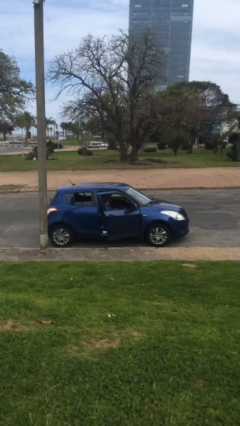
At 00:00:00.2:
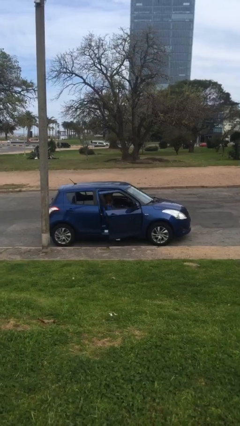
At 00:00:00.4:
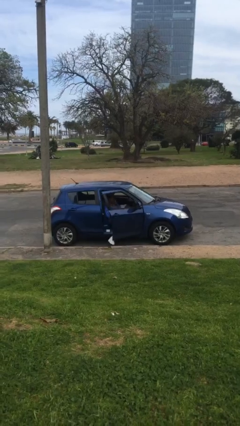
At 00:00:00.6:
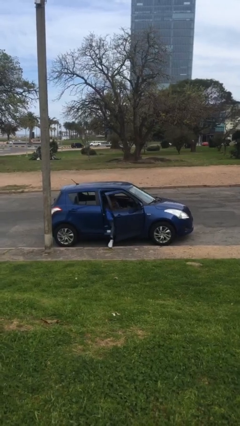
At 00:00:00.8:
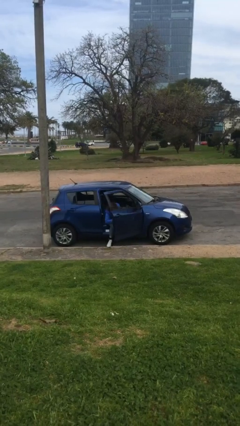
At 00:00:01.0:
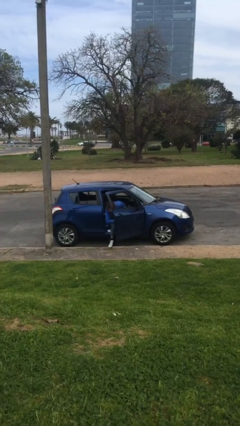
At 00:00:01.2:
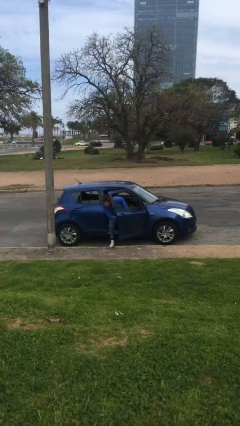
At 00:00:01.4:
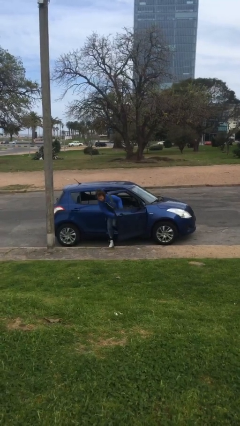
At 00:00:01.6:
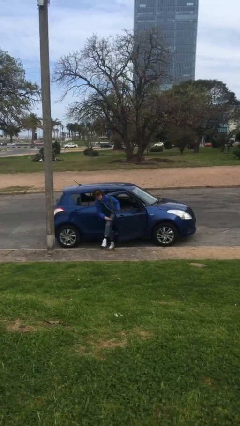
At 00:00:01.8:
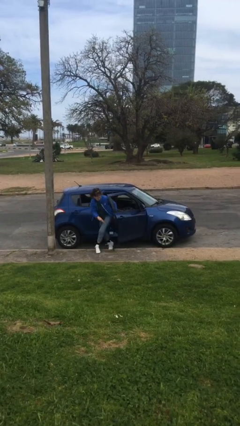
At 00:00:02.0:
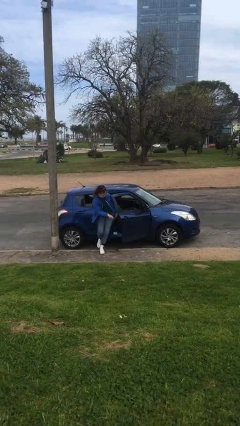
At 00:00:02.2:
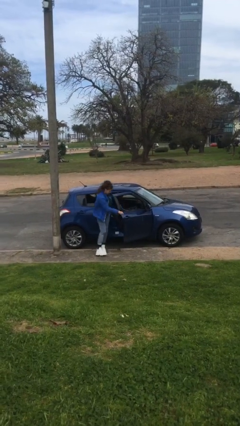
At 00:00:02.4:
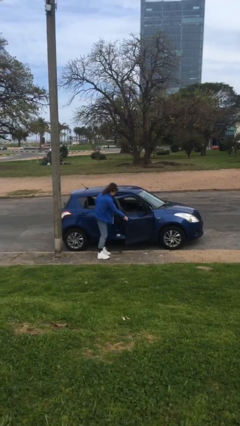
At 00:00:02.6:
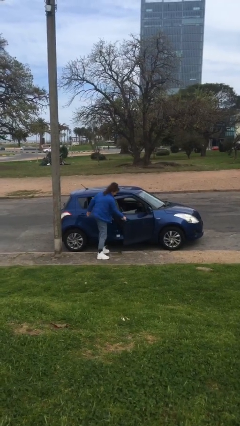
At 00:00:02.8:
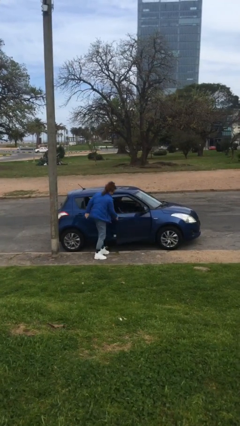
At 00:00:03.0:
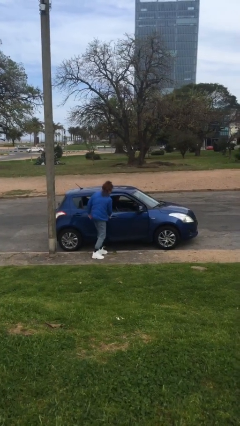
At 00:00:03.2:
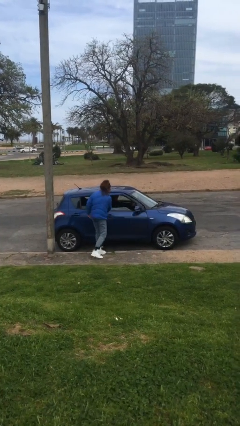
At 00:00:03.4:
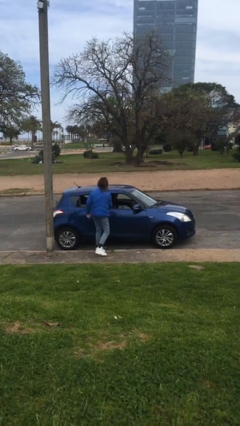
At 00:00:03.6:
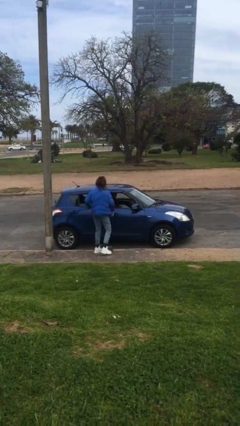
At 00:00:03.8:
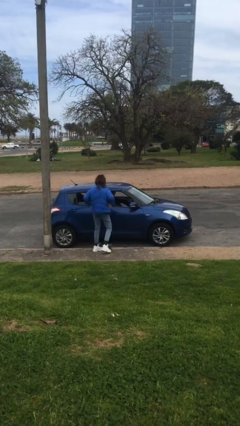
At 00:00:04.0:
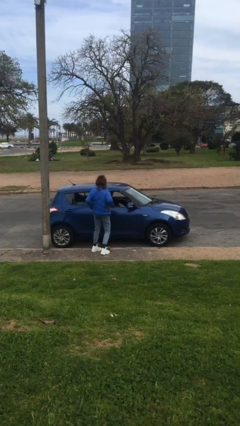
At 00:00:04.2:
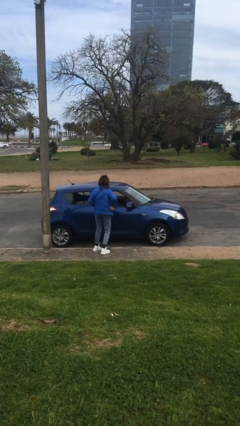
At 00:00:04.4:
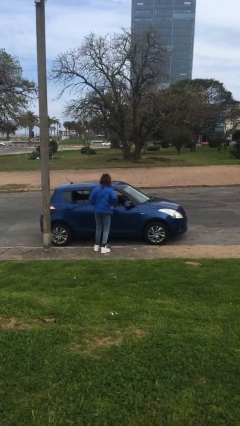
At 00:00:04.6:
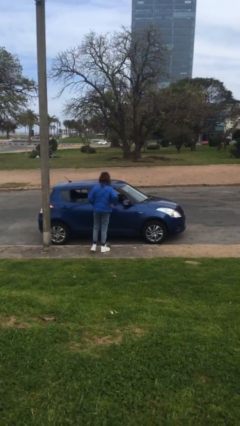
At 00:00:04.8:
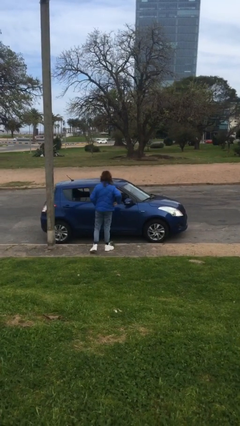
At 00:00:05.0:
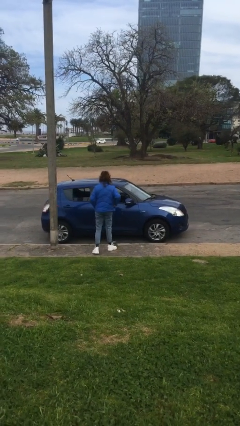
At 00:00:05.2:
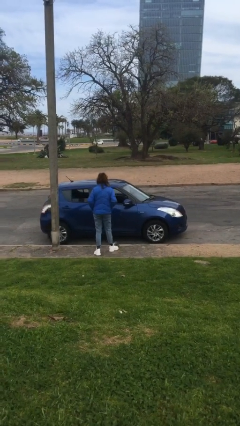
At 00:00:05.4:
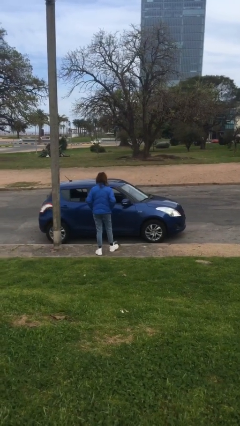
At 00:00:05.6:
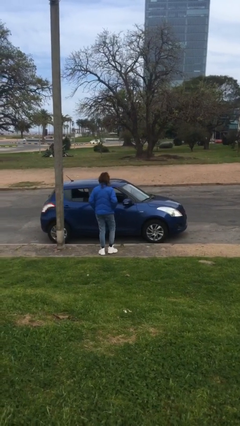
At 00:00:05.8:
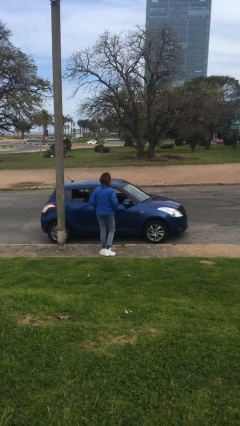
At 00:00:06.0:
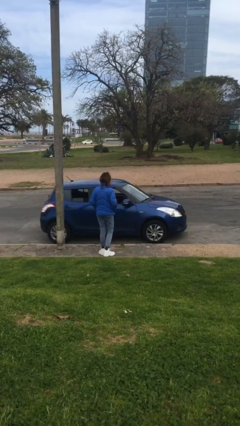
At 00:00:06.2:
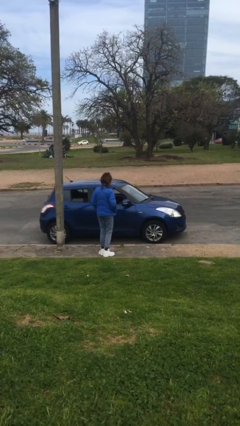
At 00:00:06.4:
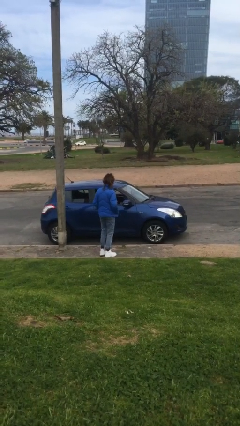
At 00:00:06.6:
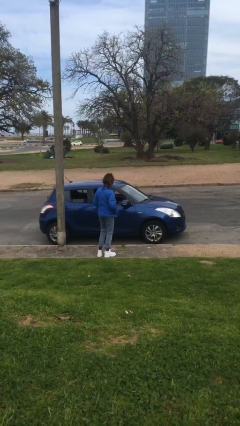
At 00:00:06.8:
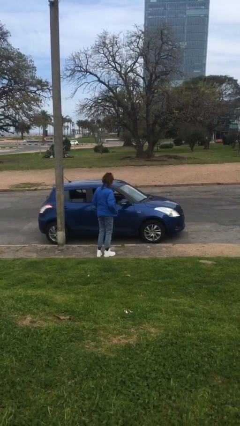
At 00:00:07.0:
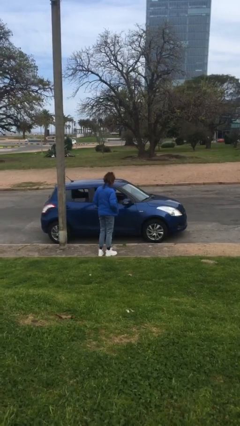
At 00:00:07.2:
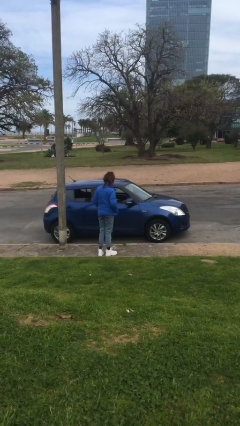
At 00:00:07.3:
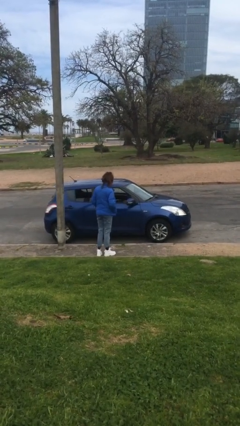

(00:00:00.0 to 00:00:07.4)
car drops off person

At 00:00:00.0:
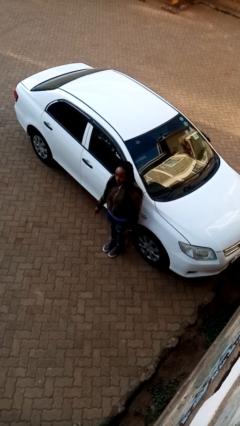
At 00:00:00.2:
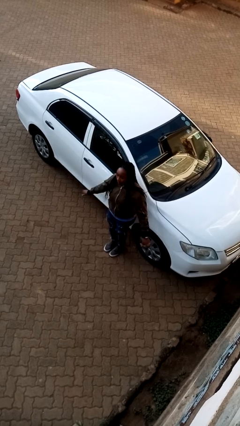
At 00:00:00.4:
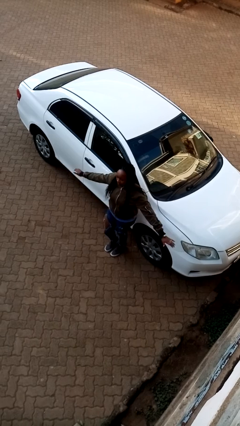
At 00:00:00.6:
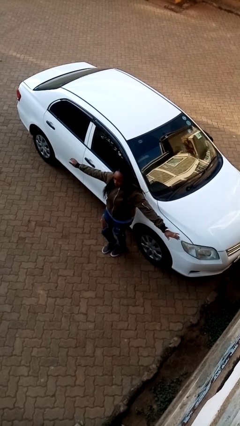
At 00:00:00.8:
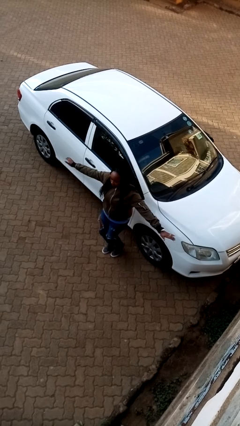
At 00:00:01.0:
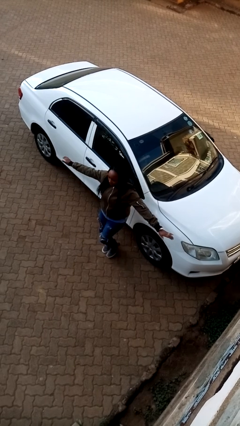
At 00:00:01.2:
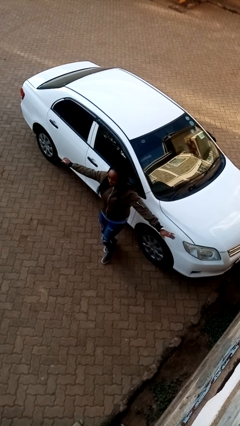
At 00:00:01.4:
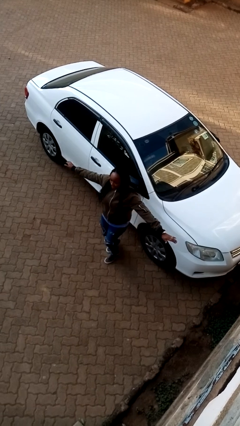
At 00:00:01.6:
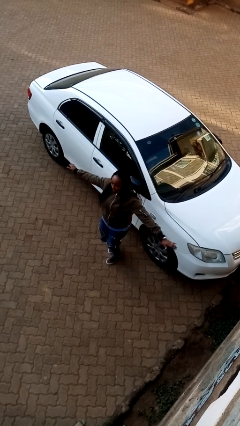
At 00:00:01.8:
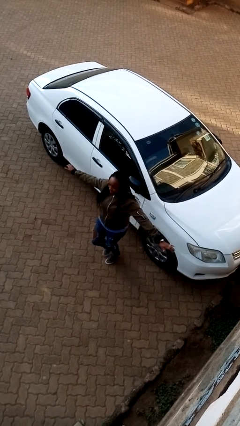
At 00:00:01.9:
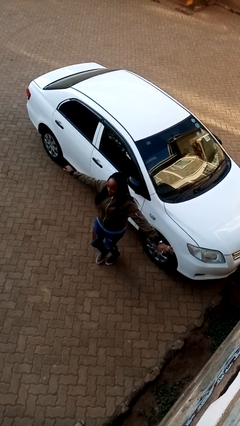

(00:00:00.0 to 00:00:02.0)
person walks tiptoe

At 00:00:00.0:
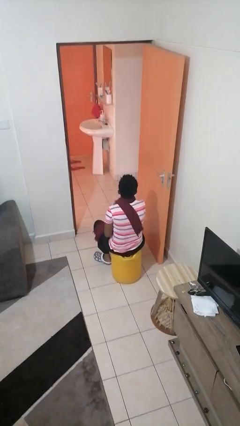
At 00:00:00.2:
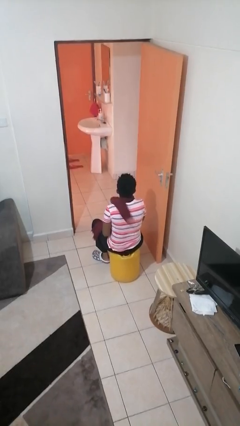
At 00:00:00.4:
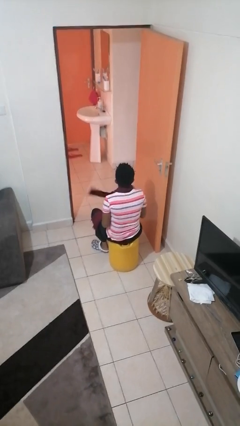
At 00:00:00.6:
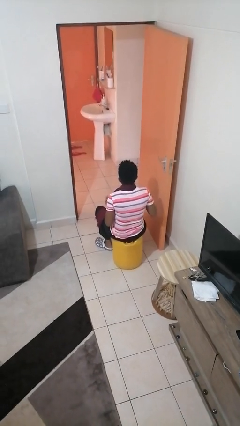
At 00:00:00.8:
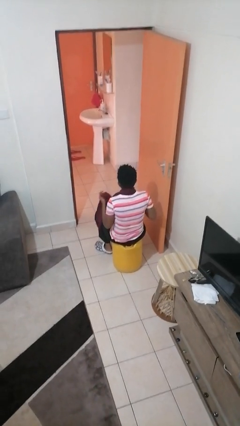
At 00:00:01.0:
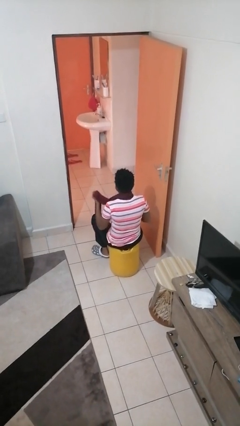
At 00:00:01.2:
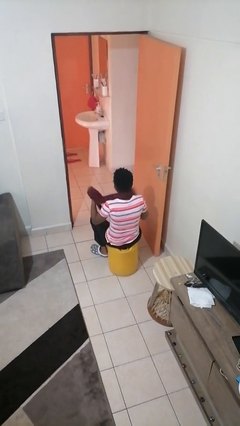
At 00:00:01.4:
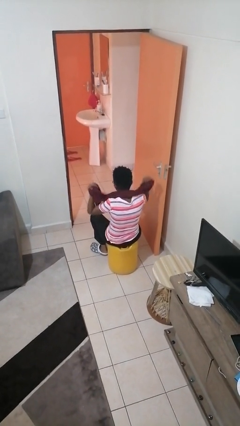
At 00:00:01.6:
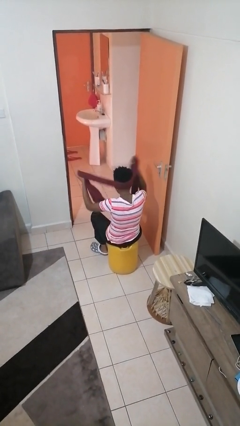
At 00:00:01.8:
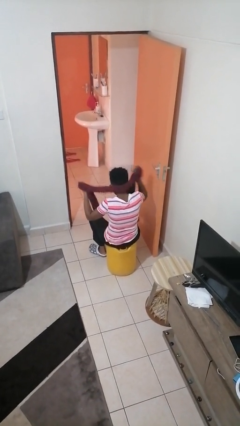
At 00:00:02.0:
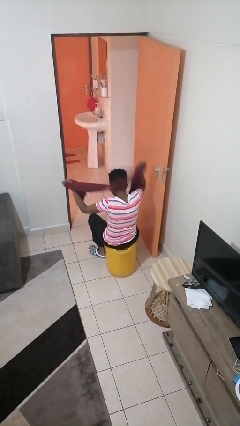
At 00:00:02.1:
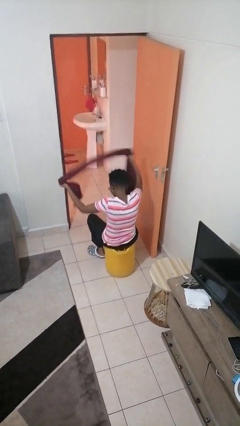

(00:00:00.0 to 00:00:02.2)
person takes off scarf

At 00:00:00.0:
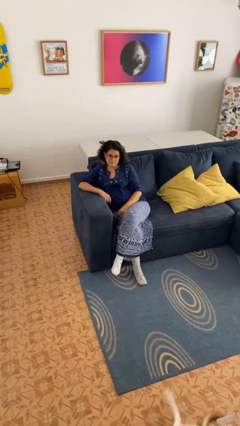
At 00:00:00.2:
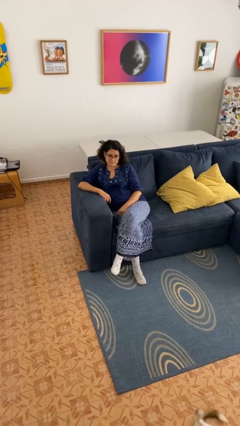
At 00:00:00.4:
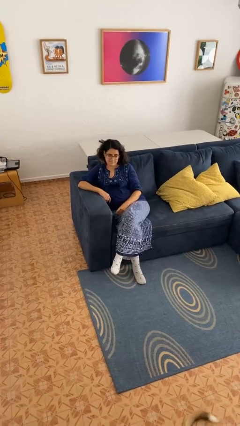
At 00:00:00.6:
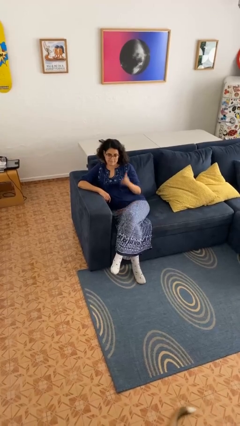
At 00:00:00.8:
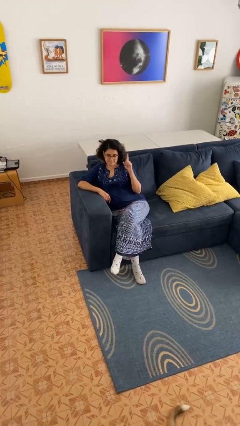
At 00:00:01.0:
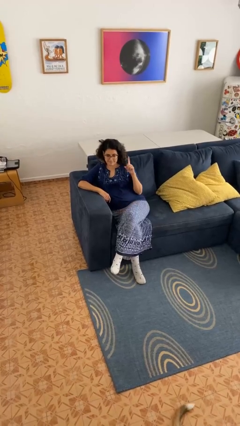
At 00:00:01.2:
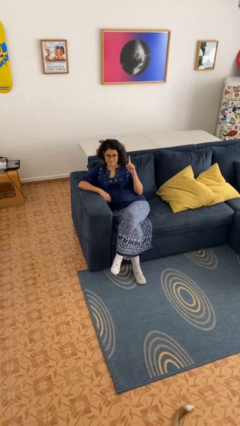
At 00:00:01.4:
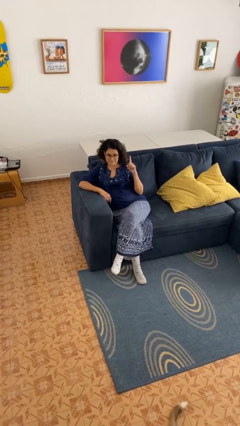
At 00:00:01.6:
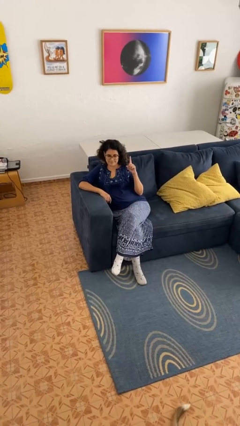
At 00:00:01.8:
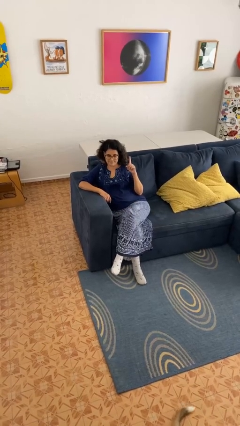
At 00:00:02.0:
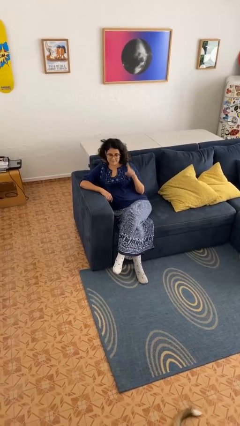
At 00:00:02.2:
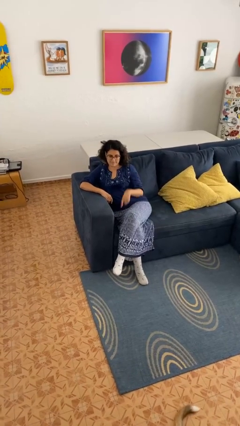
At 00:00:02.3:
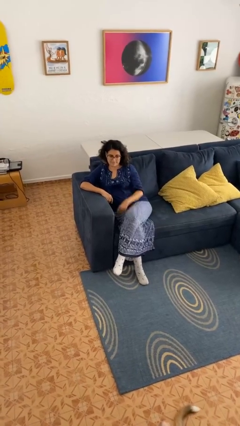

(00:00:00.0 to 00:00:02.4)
person gestures number one

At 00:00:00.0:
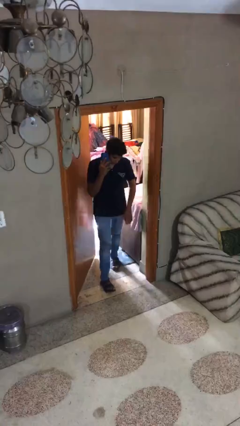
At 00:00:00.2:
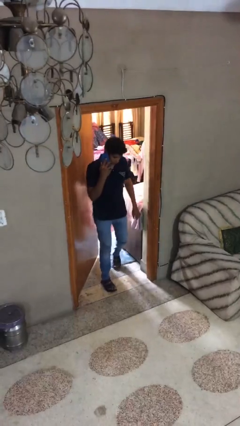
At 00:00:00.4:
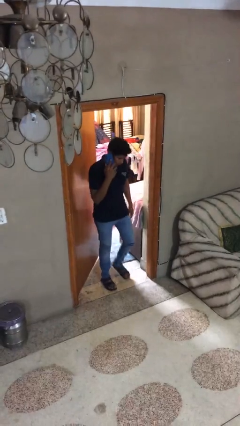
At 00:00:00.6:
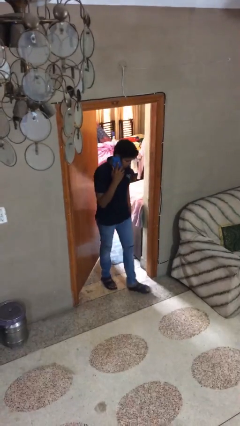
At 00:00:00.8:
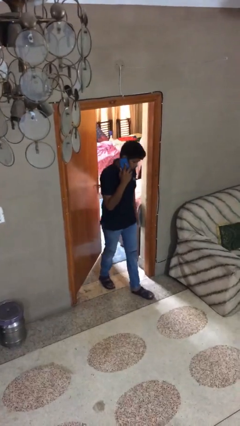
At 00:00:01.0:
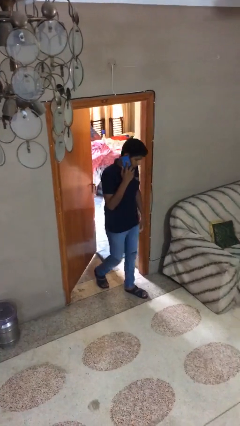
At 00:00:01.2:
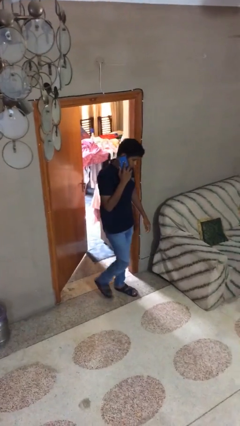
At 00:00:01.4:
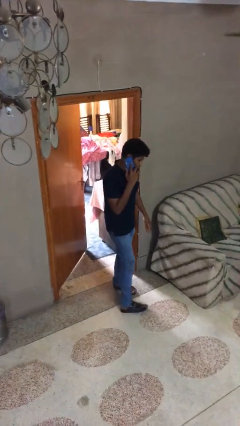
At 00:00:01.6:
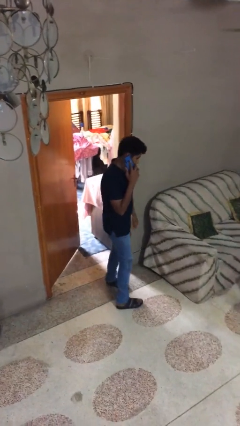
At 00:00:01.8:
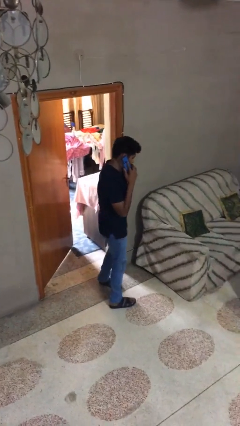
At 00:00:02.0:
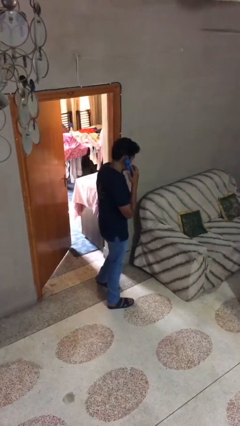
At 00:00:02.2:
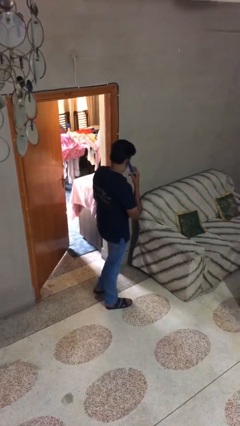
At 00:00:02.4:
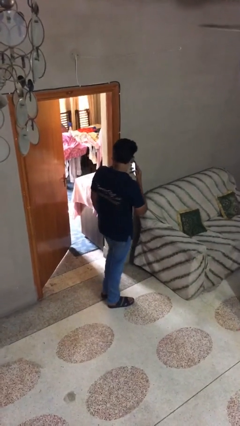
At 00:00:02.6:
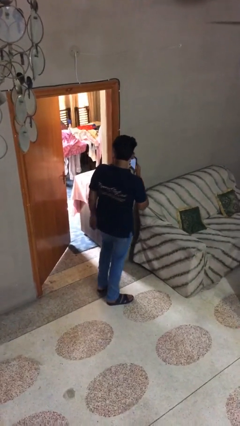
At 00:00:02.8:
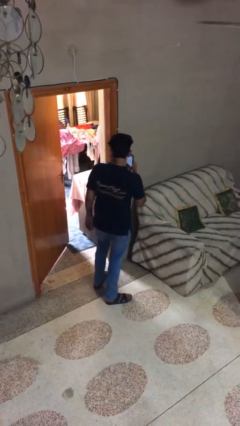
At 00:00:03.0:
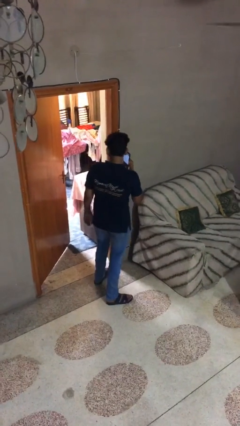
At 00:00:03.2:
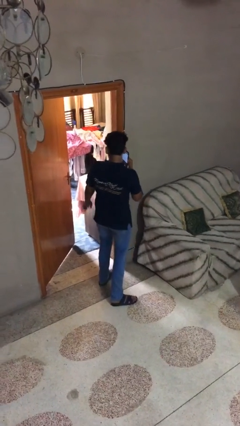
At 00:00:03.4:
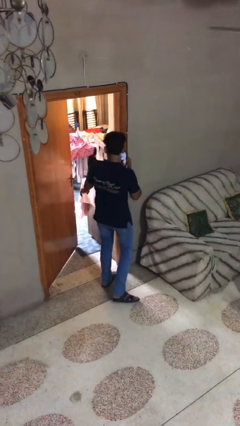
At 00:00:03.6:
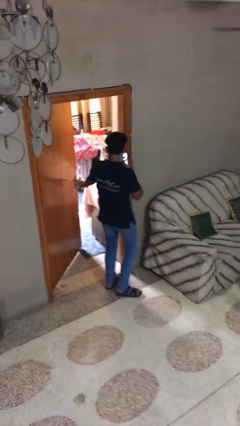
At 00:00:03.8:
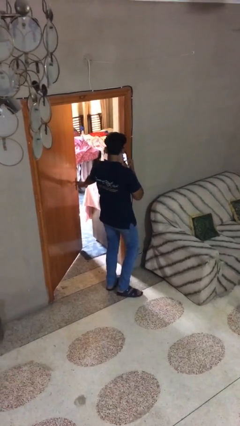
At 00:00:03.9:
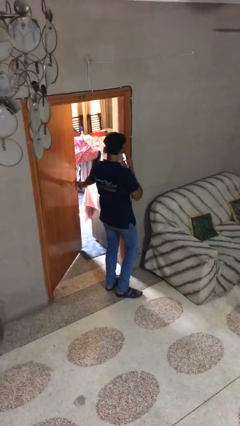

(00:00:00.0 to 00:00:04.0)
person enters scene through structure
